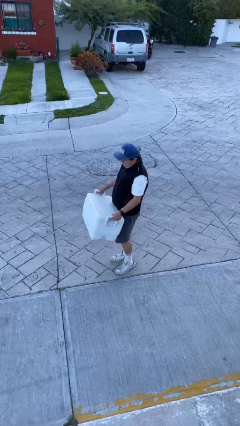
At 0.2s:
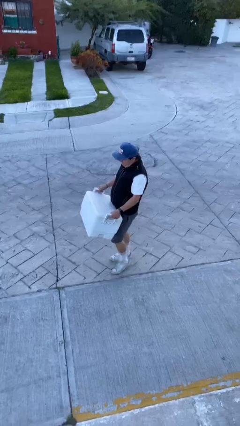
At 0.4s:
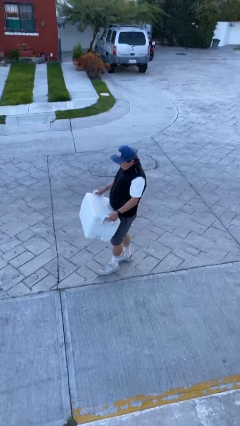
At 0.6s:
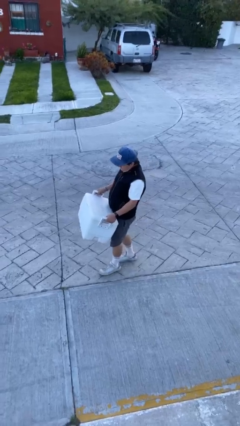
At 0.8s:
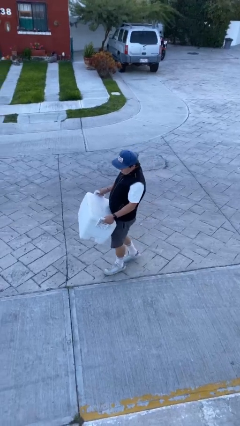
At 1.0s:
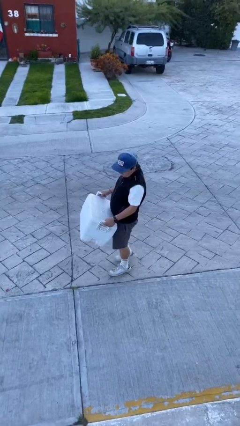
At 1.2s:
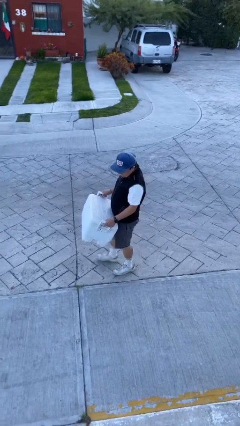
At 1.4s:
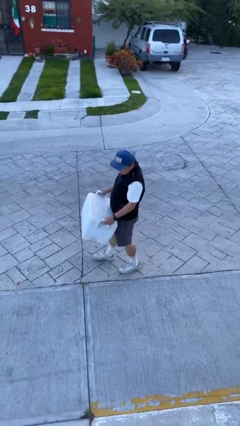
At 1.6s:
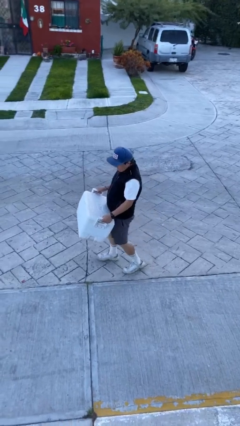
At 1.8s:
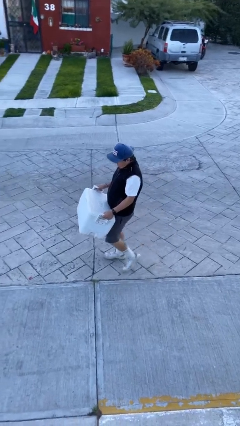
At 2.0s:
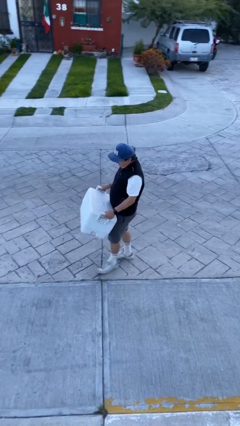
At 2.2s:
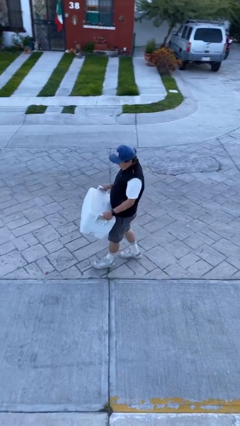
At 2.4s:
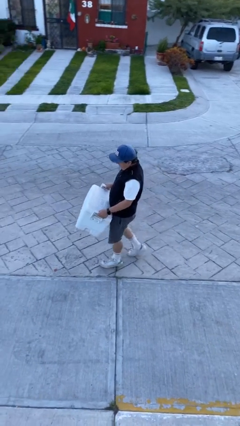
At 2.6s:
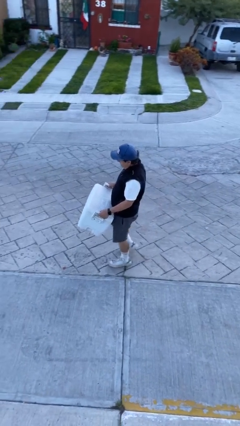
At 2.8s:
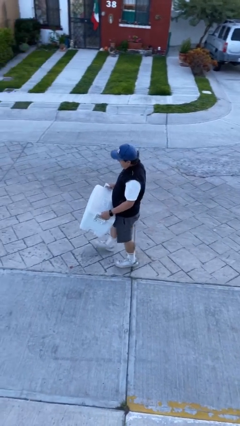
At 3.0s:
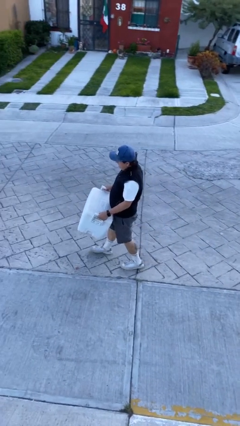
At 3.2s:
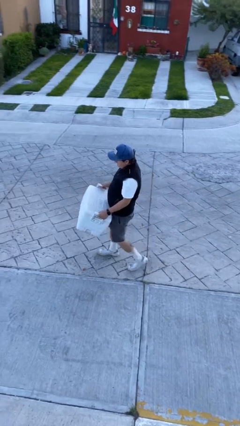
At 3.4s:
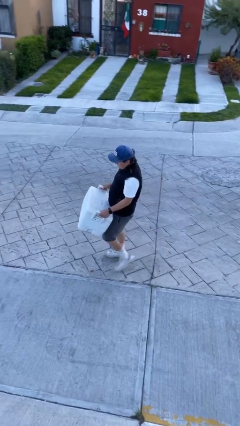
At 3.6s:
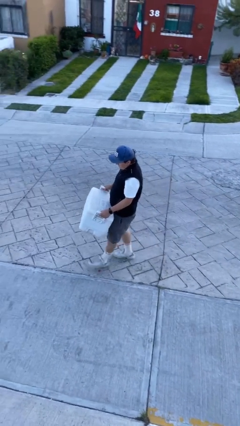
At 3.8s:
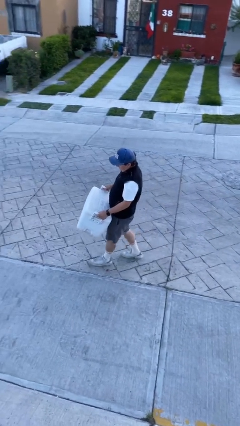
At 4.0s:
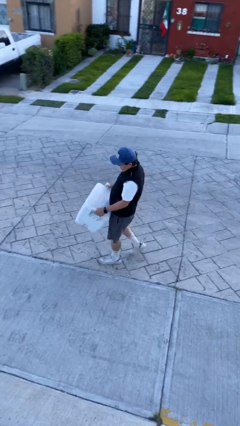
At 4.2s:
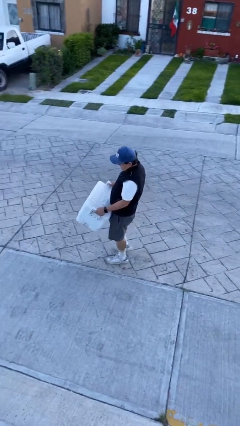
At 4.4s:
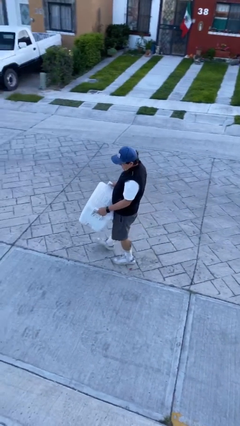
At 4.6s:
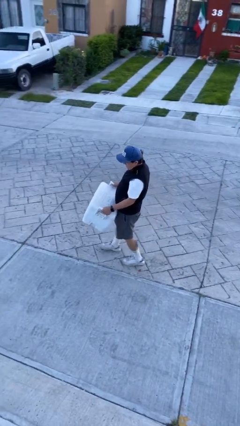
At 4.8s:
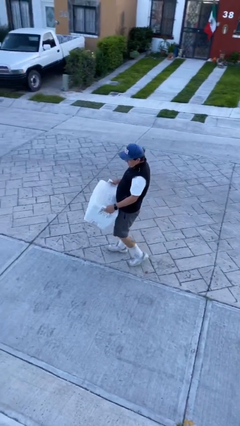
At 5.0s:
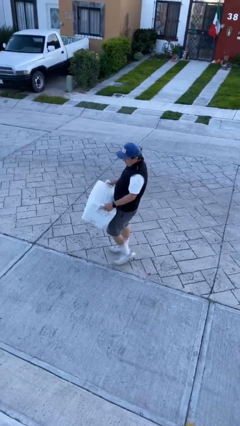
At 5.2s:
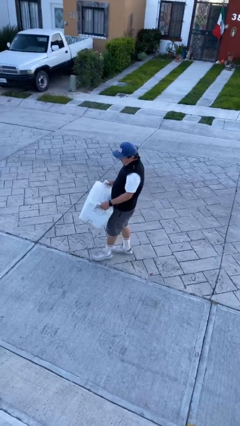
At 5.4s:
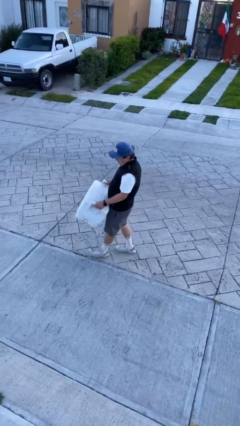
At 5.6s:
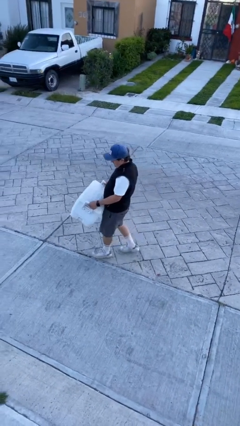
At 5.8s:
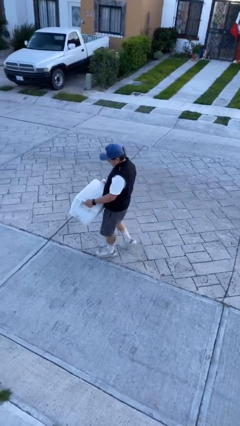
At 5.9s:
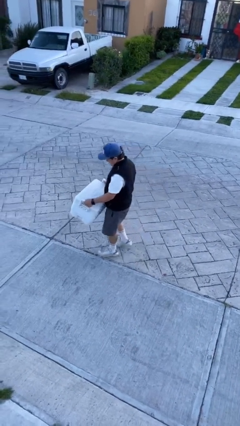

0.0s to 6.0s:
person carries heavy object

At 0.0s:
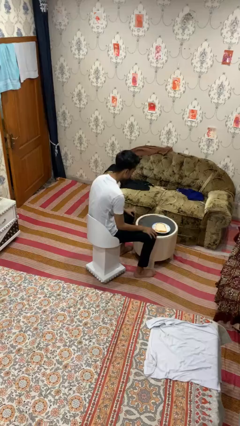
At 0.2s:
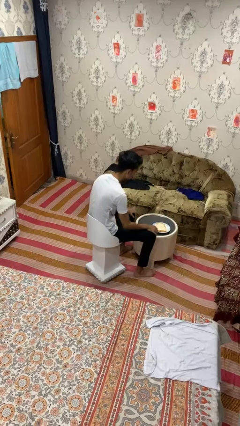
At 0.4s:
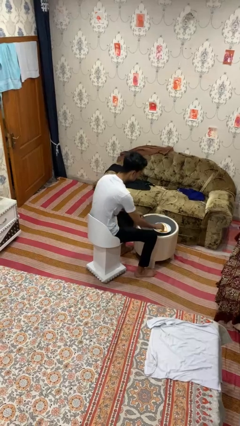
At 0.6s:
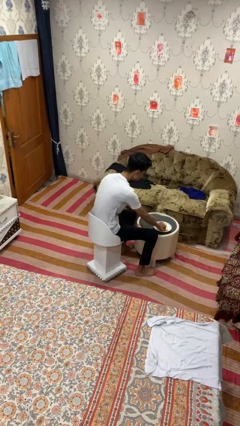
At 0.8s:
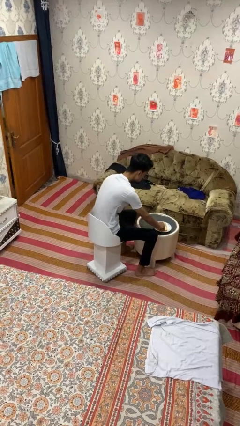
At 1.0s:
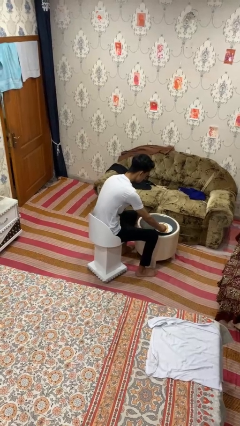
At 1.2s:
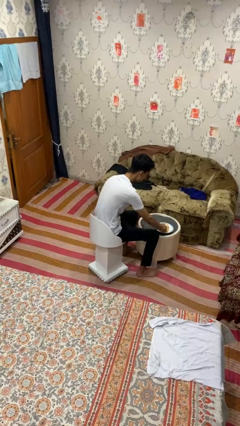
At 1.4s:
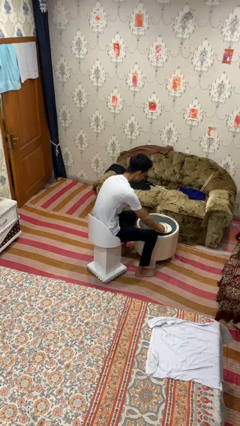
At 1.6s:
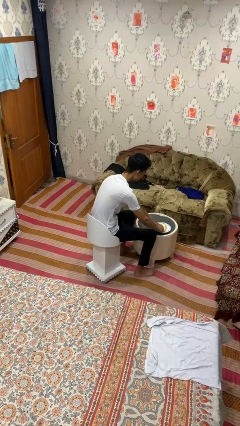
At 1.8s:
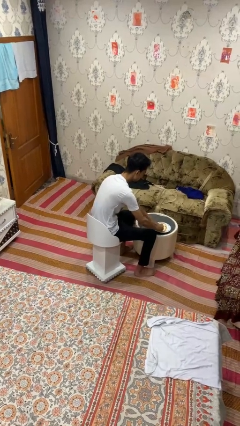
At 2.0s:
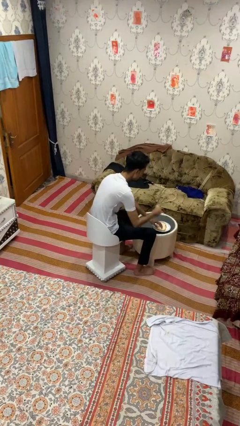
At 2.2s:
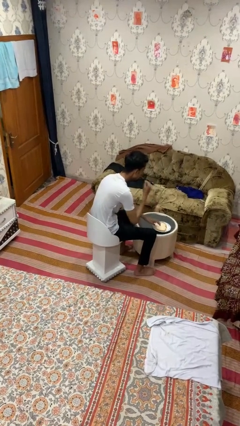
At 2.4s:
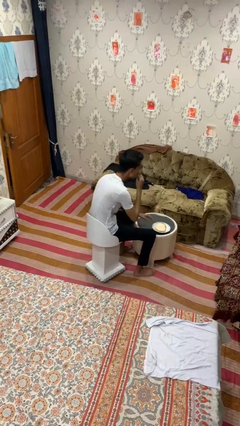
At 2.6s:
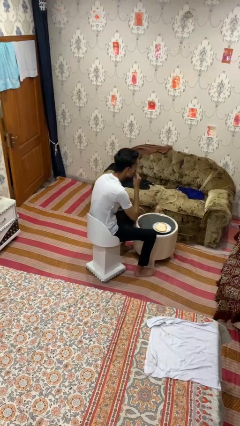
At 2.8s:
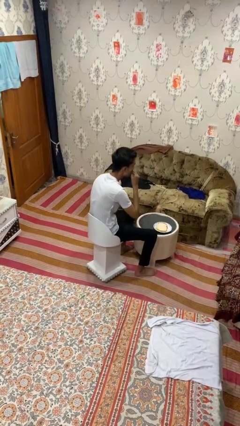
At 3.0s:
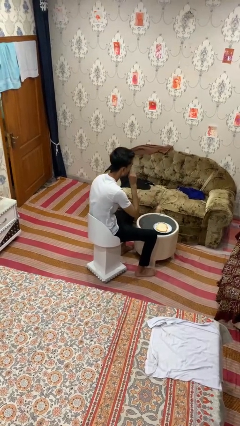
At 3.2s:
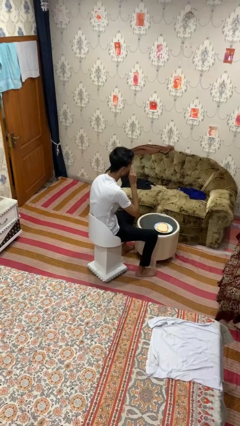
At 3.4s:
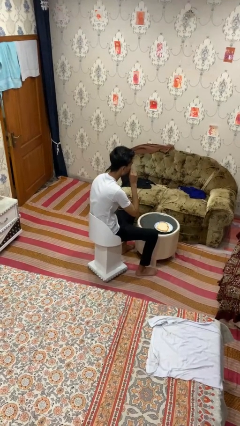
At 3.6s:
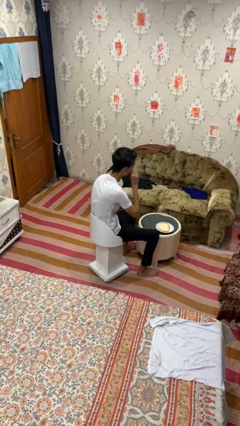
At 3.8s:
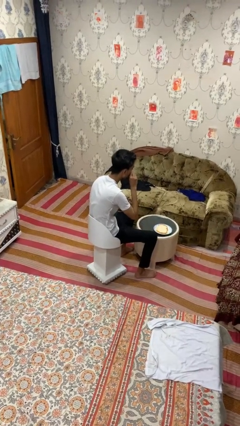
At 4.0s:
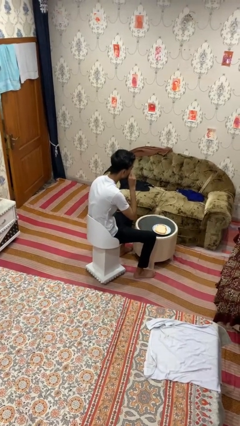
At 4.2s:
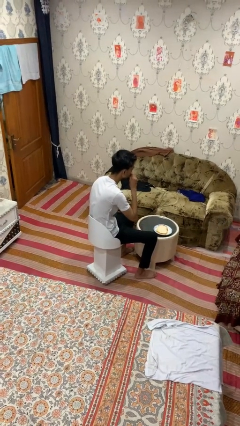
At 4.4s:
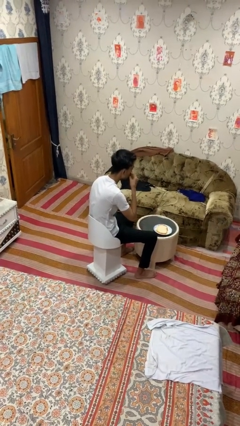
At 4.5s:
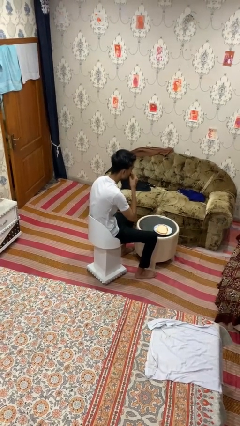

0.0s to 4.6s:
person eats with hands

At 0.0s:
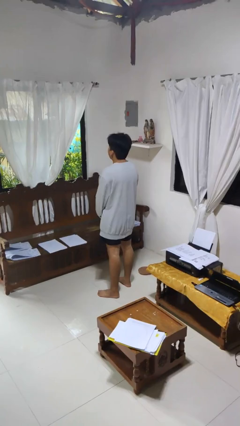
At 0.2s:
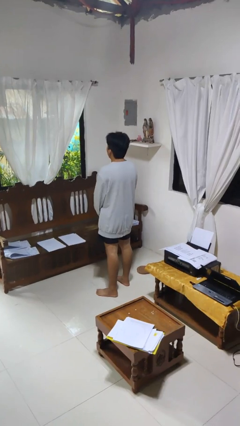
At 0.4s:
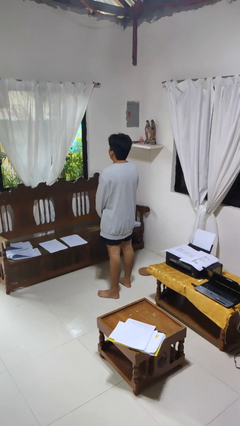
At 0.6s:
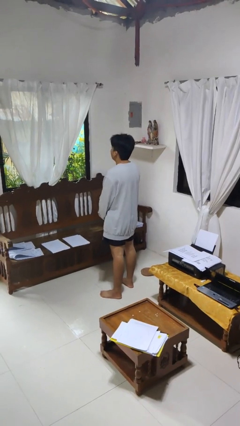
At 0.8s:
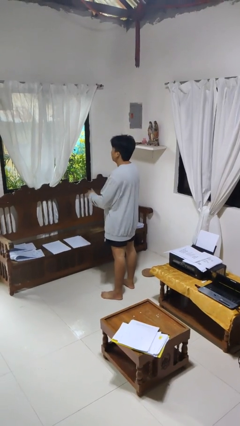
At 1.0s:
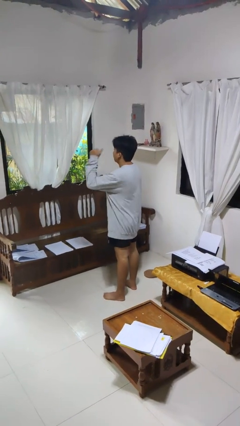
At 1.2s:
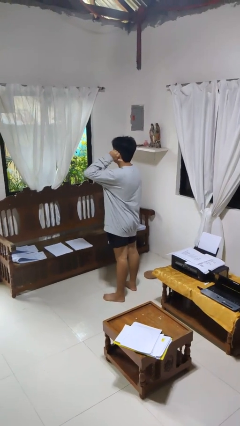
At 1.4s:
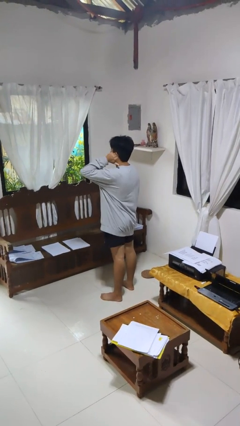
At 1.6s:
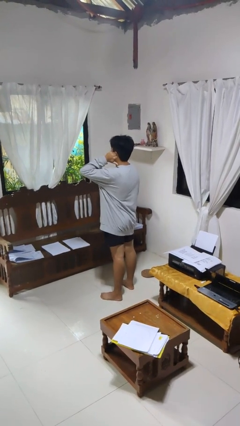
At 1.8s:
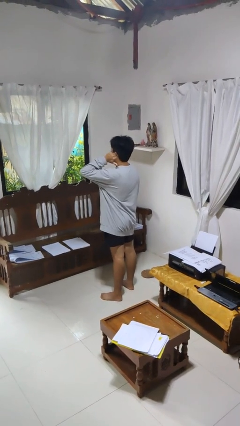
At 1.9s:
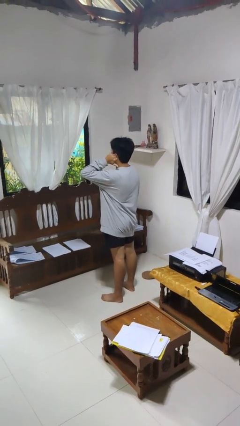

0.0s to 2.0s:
person gestures behind me

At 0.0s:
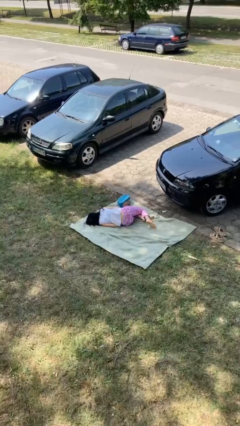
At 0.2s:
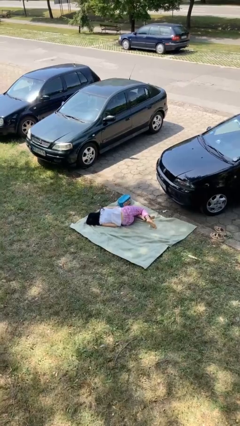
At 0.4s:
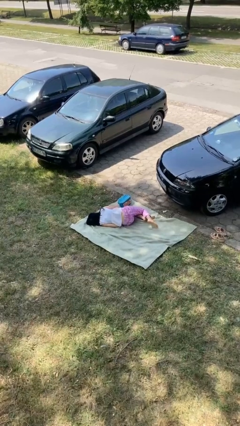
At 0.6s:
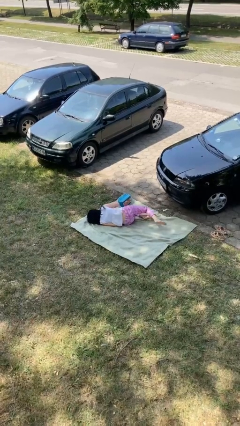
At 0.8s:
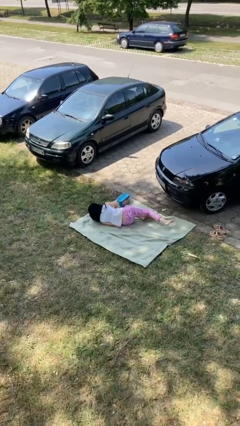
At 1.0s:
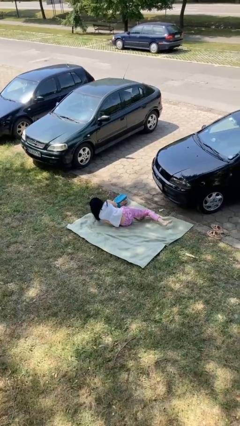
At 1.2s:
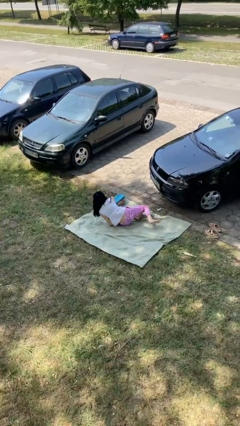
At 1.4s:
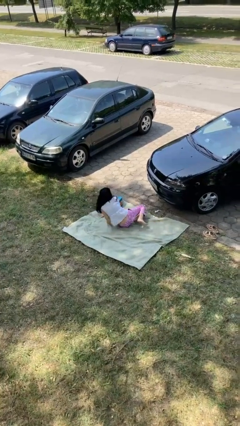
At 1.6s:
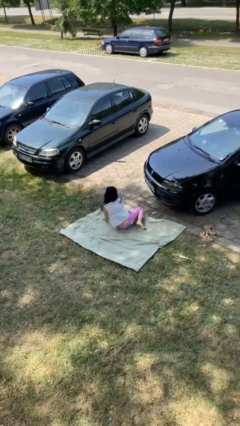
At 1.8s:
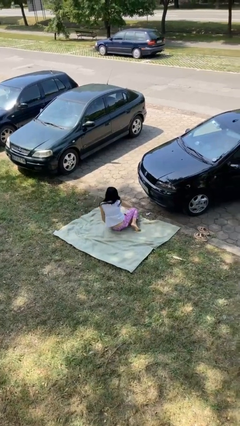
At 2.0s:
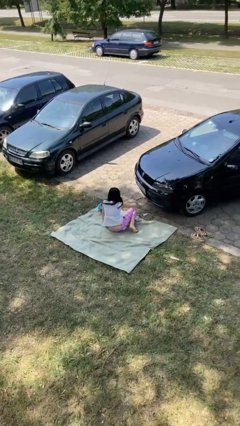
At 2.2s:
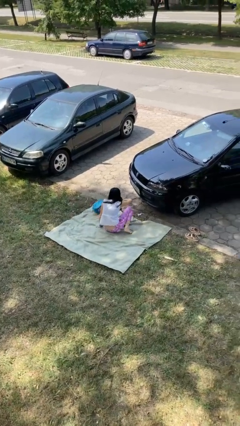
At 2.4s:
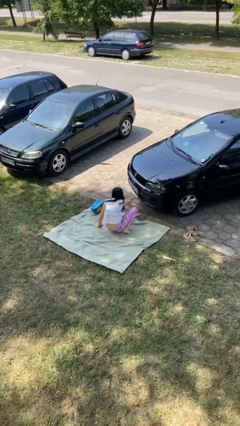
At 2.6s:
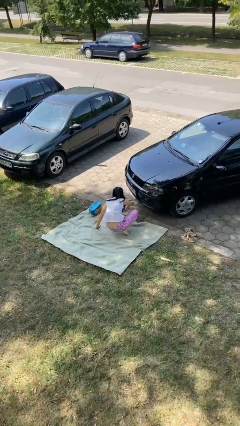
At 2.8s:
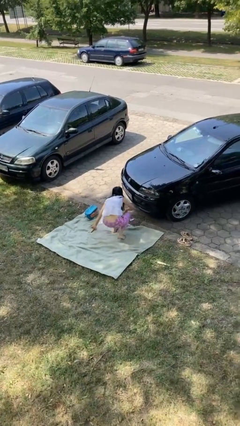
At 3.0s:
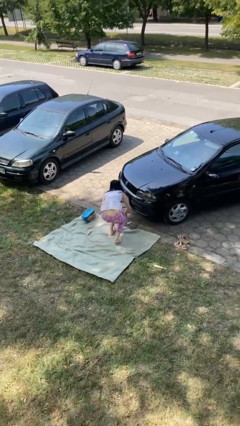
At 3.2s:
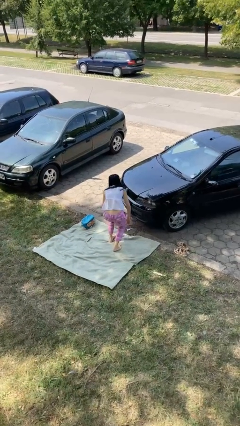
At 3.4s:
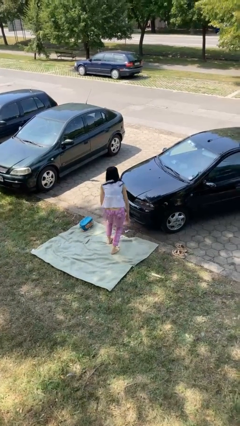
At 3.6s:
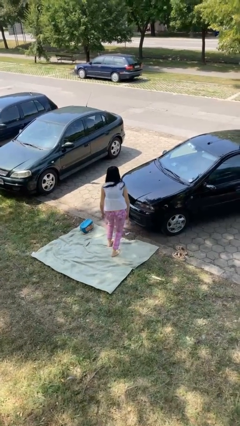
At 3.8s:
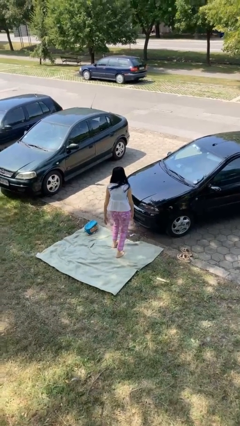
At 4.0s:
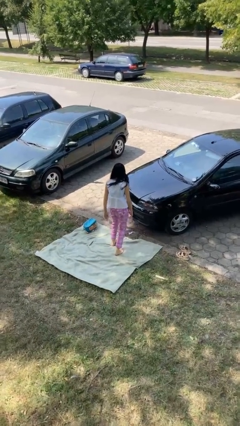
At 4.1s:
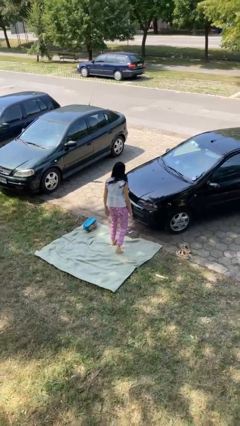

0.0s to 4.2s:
person stands up from floor

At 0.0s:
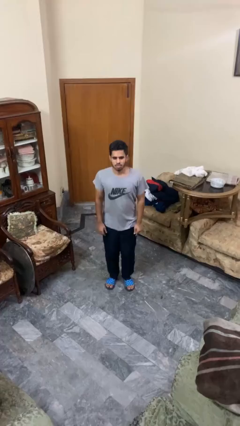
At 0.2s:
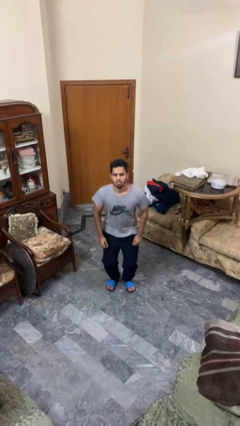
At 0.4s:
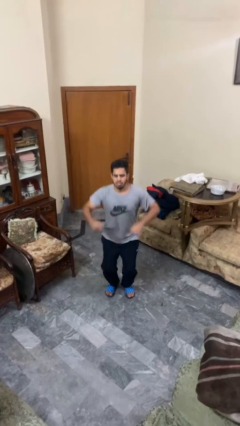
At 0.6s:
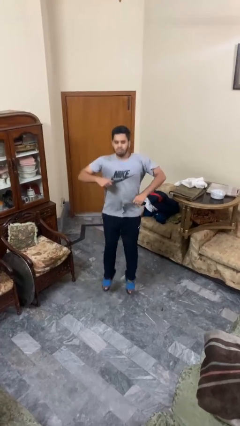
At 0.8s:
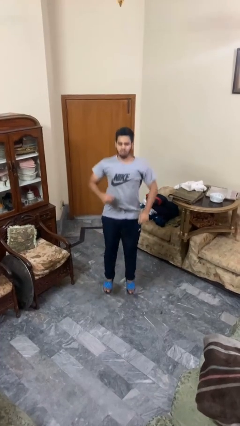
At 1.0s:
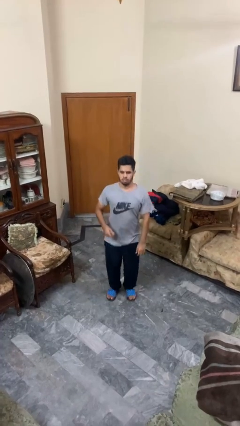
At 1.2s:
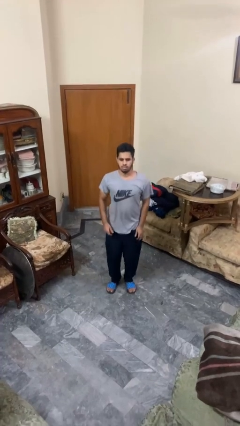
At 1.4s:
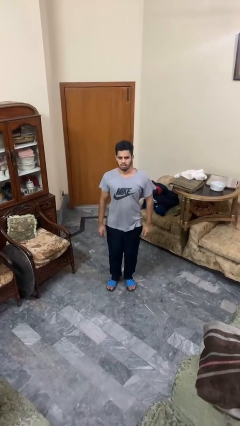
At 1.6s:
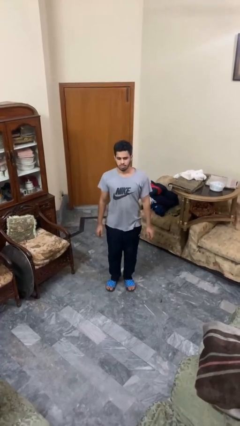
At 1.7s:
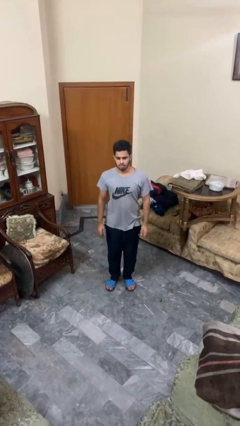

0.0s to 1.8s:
person jumps
